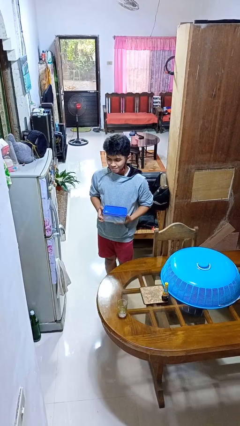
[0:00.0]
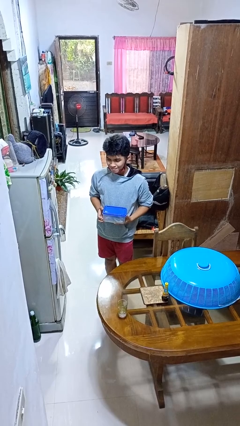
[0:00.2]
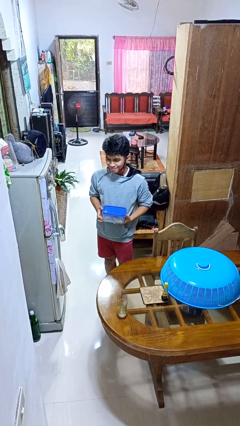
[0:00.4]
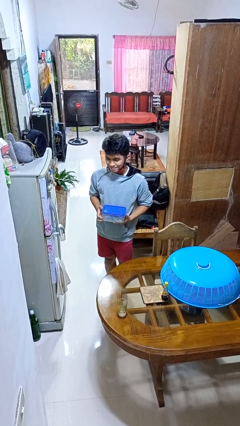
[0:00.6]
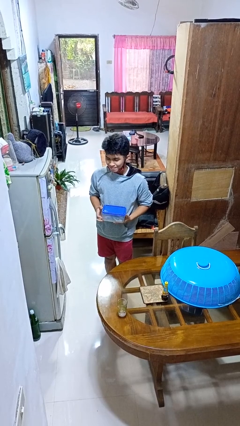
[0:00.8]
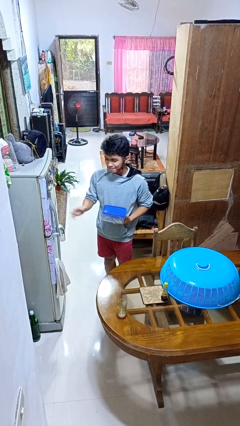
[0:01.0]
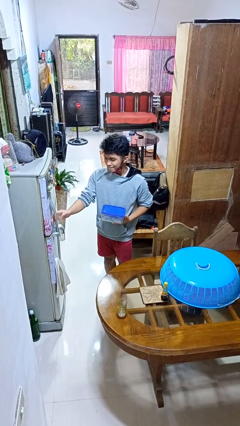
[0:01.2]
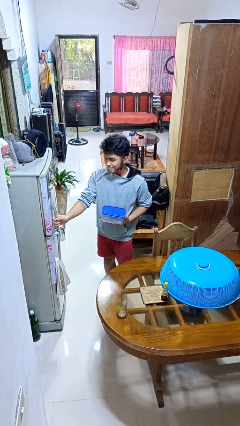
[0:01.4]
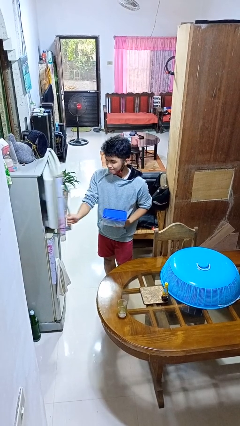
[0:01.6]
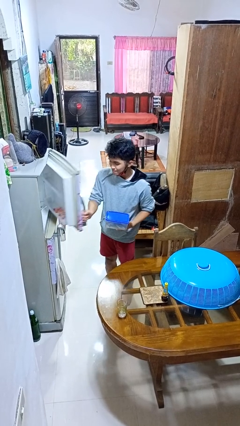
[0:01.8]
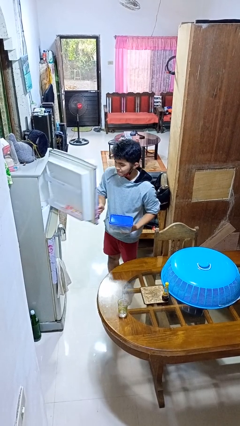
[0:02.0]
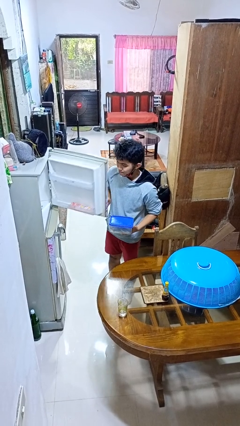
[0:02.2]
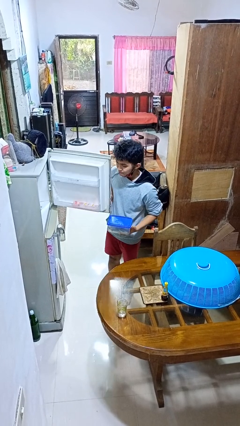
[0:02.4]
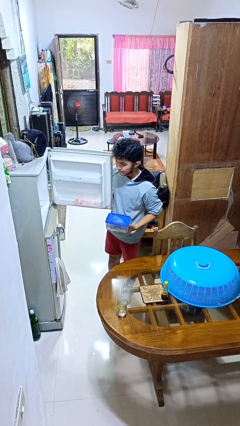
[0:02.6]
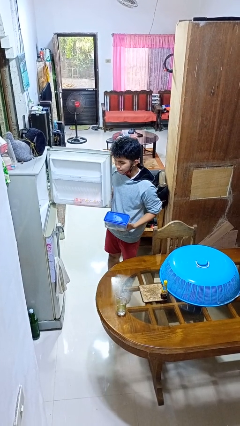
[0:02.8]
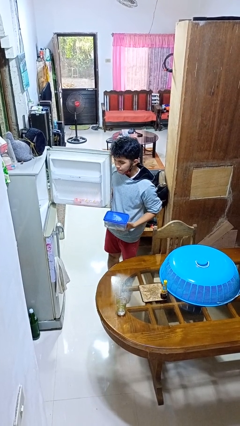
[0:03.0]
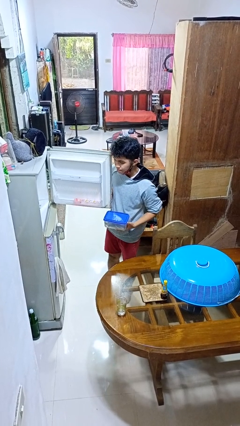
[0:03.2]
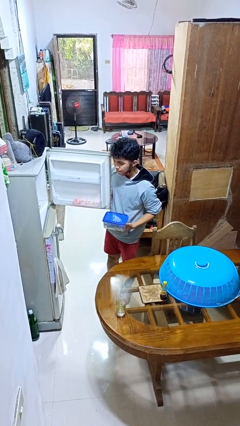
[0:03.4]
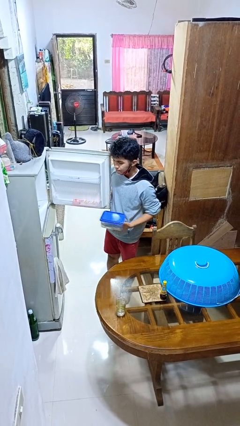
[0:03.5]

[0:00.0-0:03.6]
person opens refrigerator

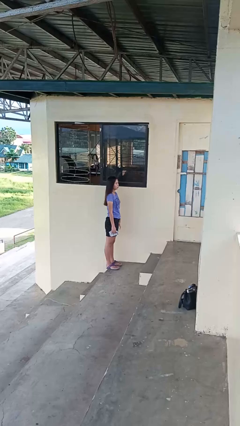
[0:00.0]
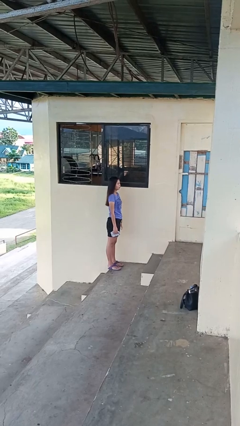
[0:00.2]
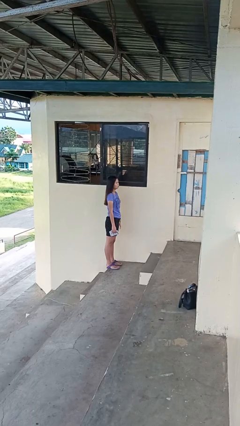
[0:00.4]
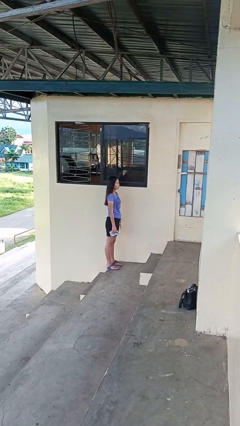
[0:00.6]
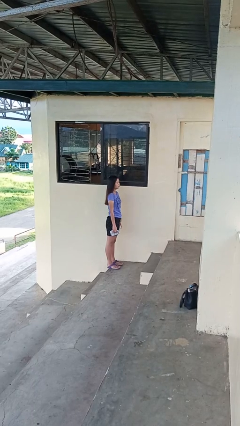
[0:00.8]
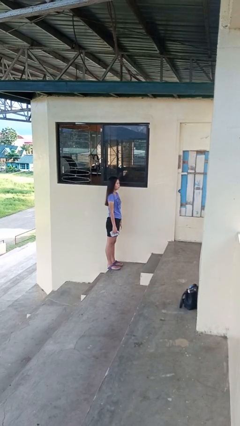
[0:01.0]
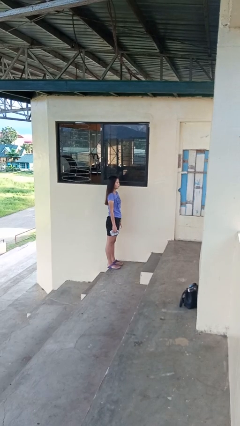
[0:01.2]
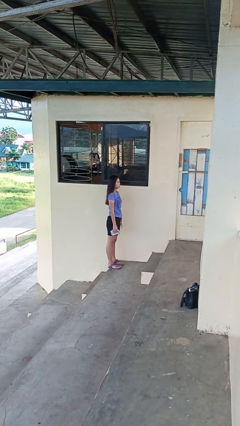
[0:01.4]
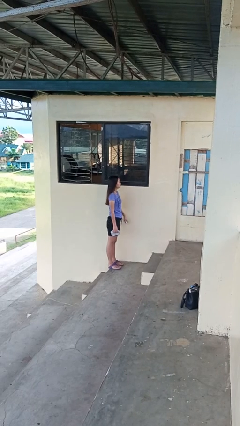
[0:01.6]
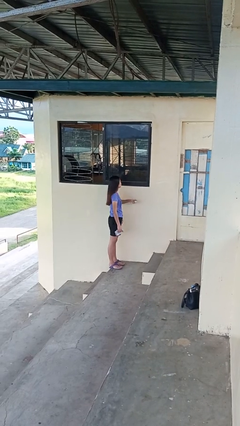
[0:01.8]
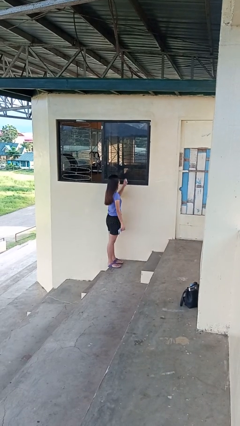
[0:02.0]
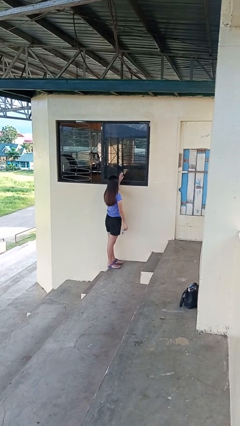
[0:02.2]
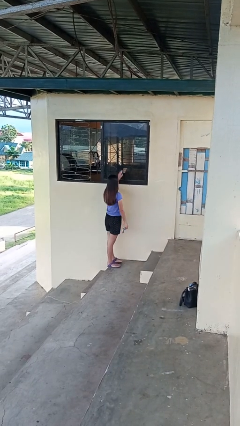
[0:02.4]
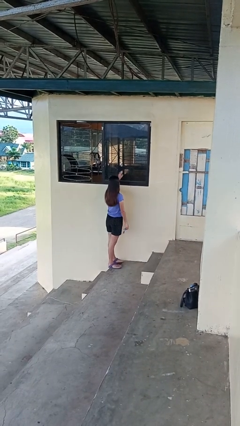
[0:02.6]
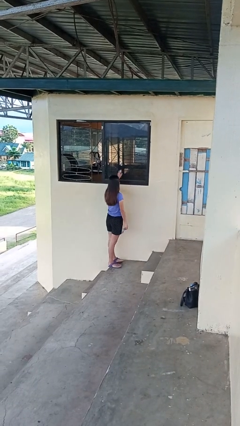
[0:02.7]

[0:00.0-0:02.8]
person sprays from bottle

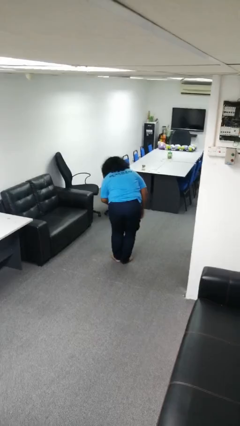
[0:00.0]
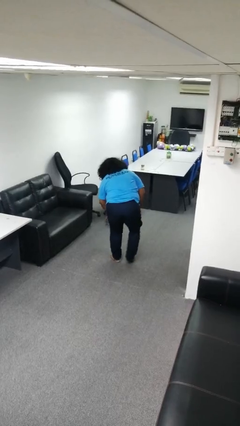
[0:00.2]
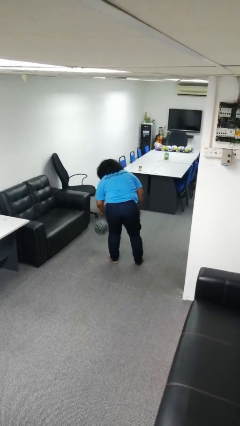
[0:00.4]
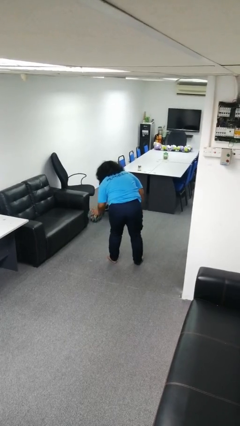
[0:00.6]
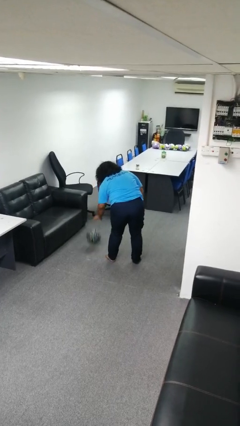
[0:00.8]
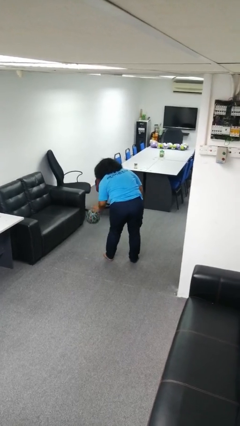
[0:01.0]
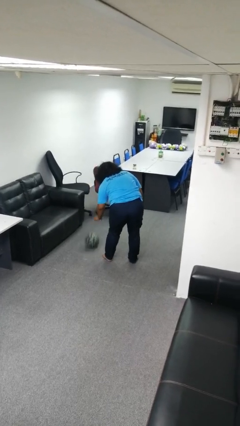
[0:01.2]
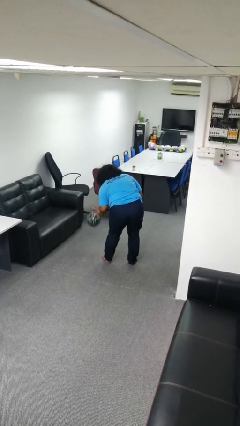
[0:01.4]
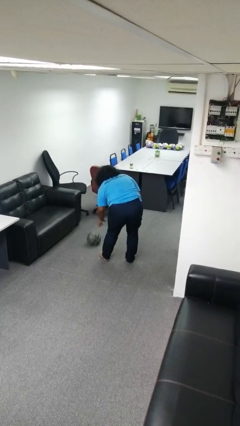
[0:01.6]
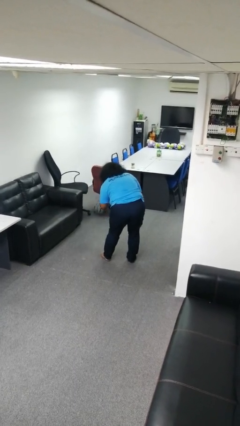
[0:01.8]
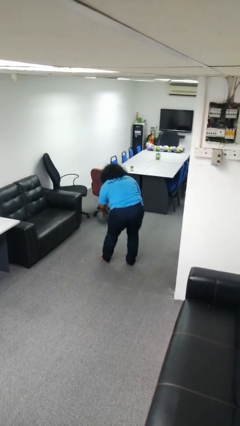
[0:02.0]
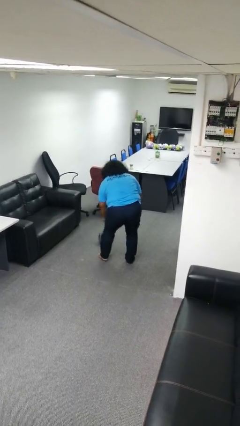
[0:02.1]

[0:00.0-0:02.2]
person bounces ball on floor

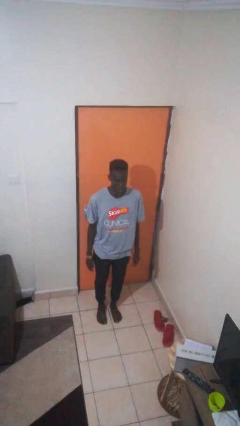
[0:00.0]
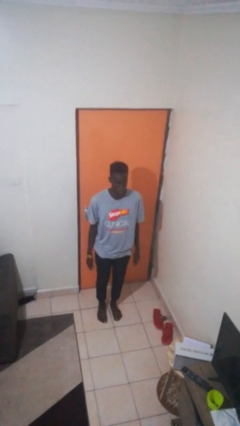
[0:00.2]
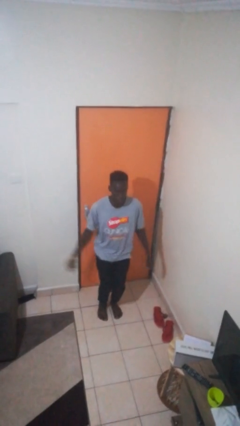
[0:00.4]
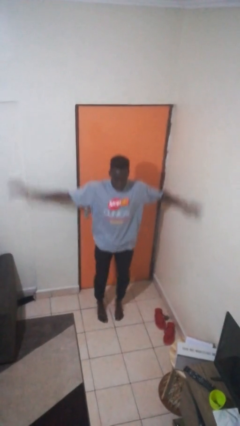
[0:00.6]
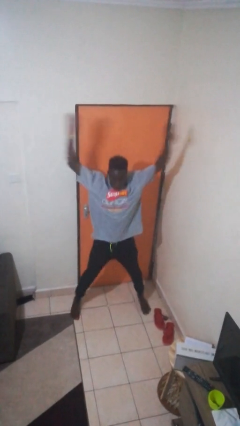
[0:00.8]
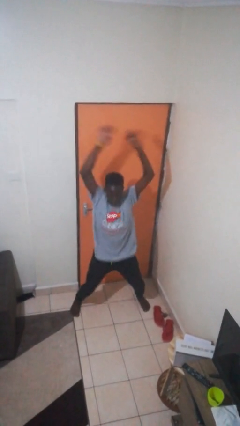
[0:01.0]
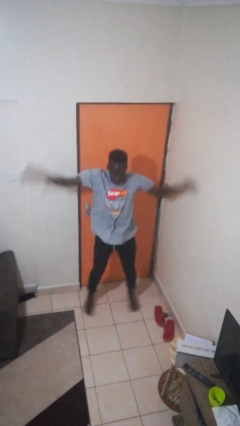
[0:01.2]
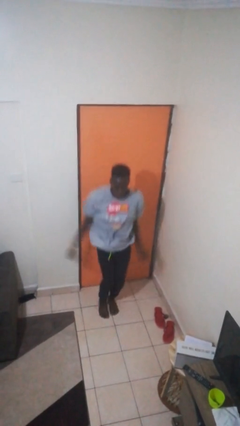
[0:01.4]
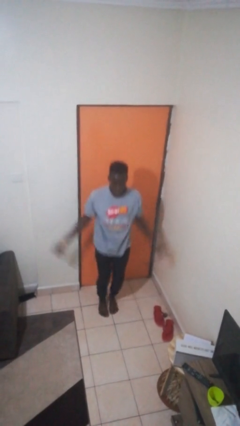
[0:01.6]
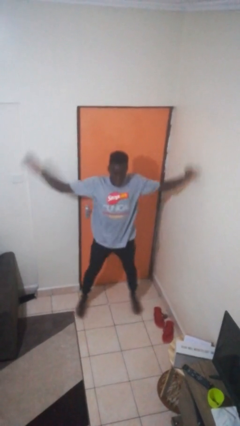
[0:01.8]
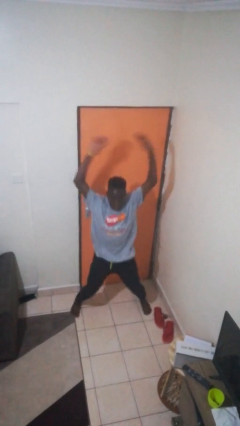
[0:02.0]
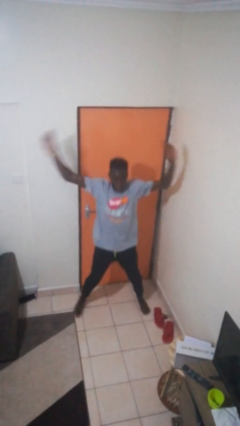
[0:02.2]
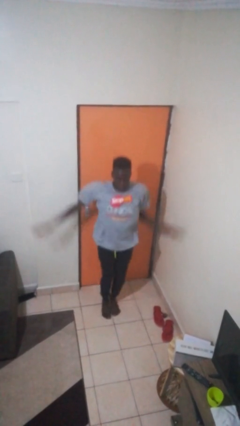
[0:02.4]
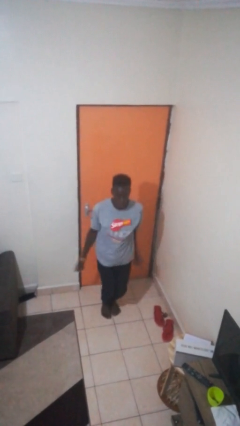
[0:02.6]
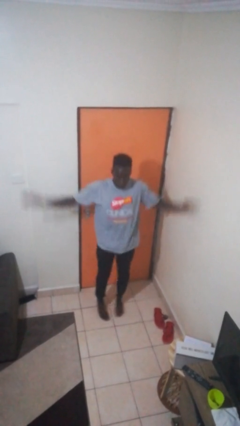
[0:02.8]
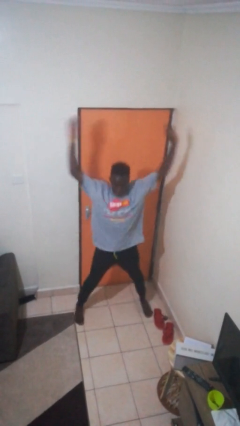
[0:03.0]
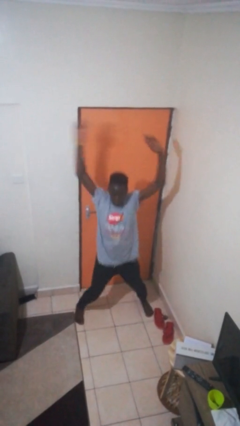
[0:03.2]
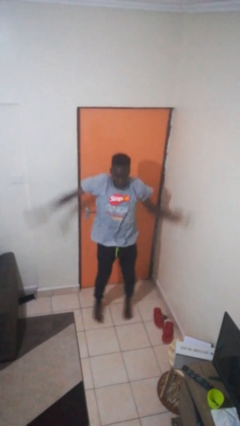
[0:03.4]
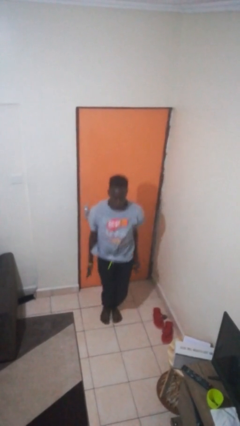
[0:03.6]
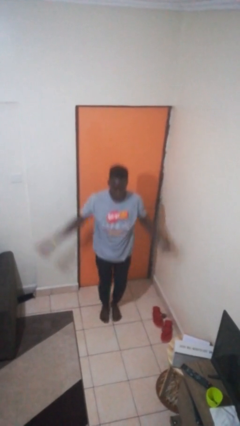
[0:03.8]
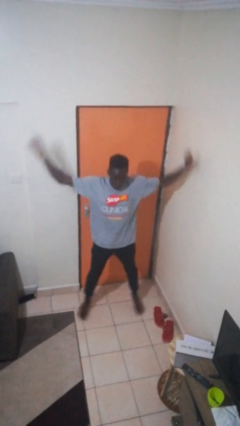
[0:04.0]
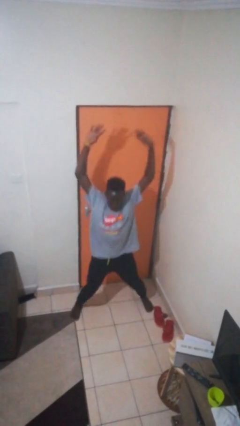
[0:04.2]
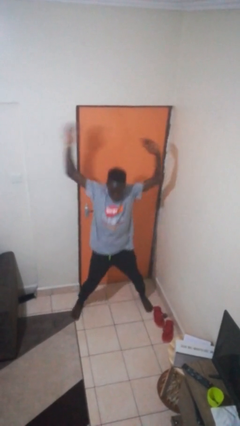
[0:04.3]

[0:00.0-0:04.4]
person exercises with jumping jacks

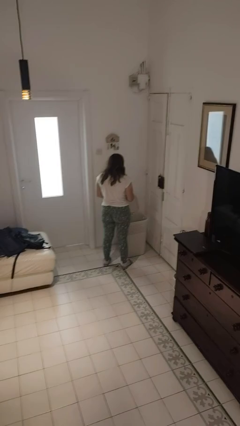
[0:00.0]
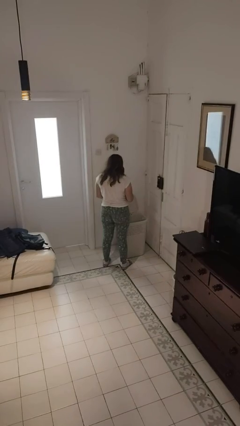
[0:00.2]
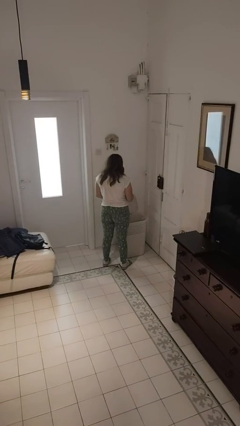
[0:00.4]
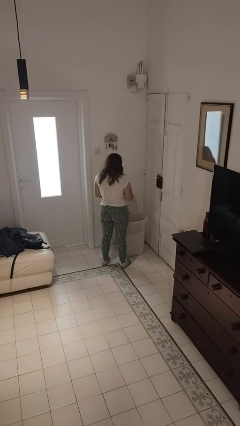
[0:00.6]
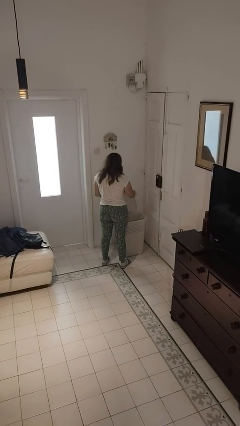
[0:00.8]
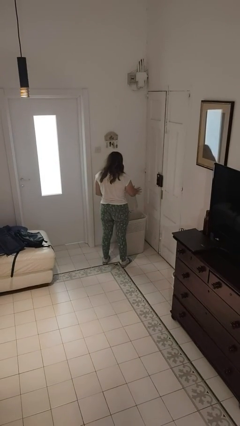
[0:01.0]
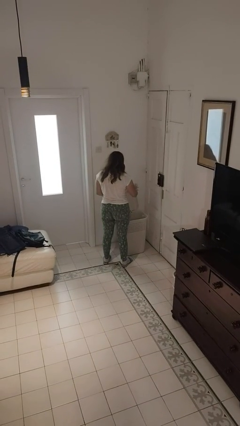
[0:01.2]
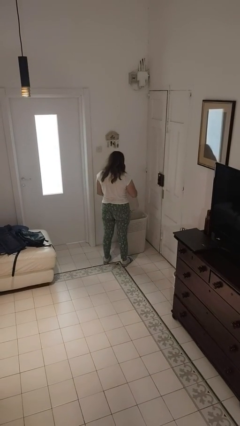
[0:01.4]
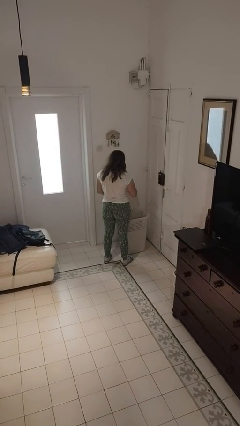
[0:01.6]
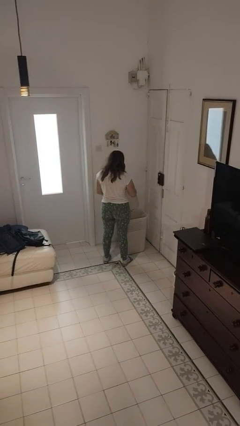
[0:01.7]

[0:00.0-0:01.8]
person discards trash

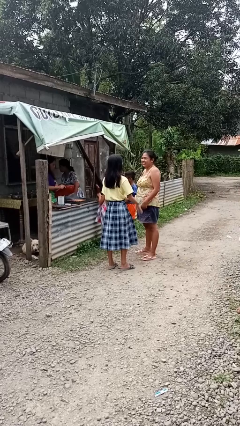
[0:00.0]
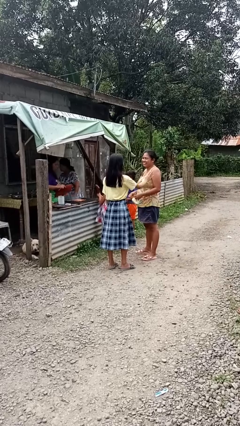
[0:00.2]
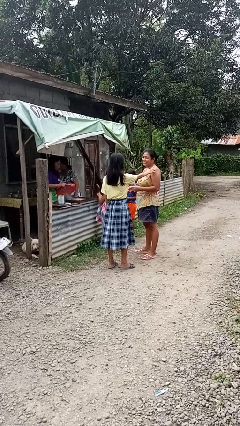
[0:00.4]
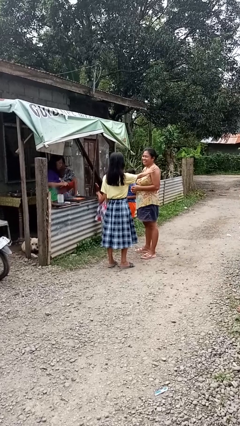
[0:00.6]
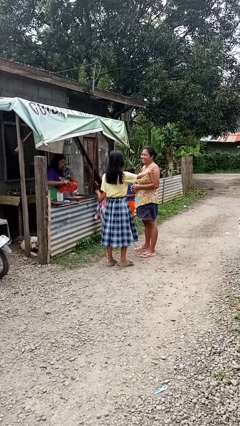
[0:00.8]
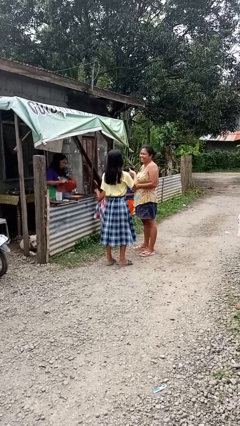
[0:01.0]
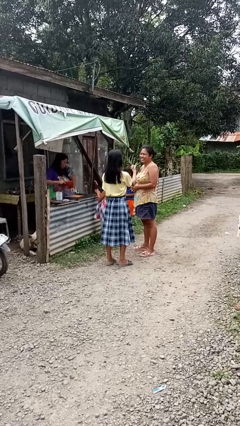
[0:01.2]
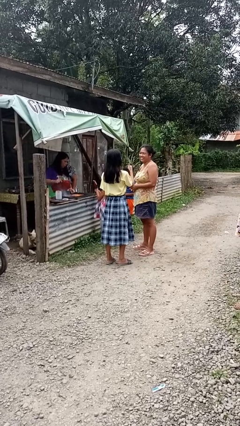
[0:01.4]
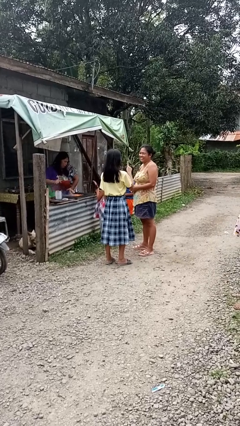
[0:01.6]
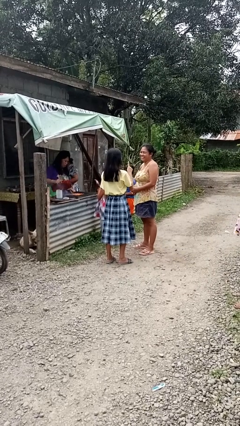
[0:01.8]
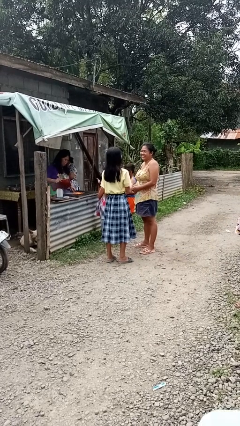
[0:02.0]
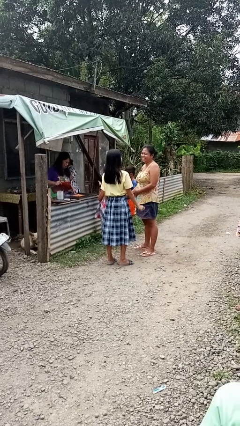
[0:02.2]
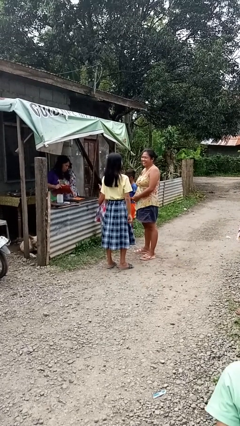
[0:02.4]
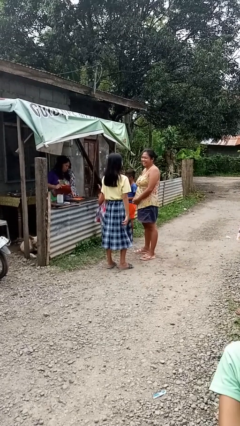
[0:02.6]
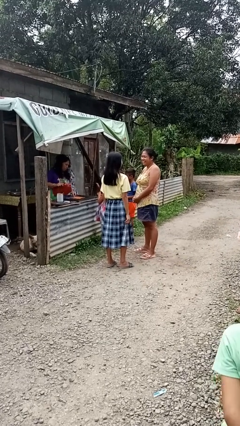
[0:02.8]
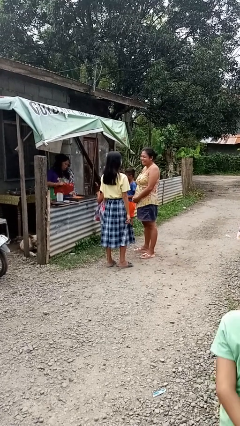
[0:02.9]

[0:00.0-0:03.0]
person talks to person
